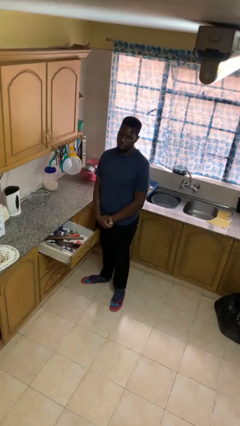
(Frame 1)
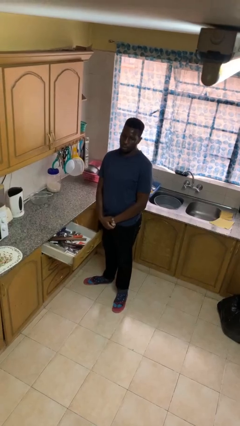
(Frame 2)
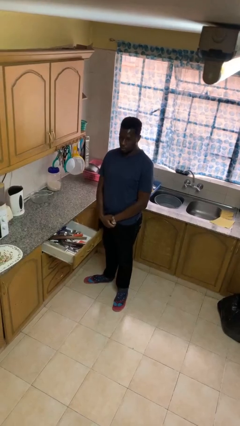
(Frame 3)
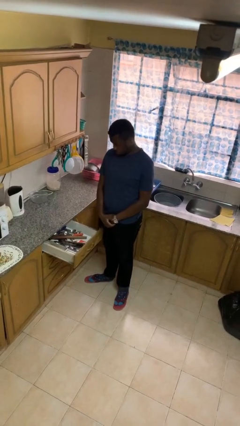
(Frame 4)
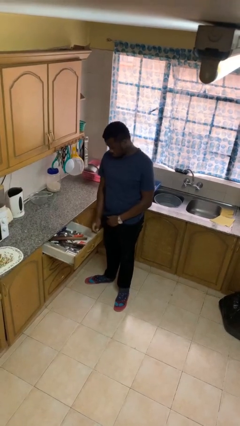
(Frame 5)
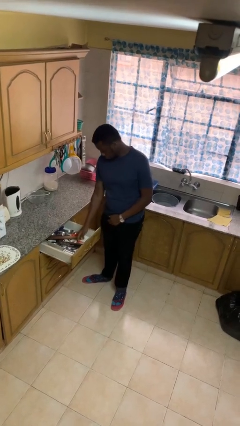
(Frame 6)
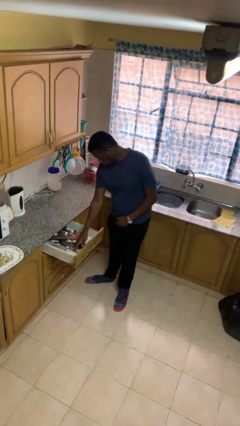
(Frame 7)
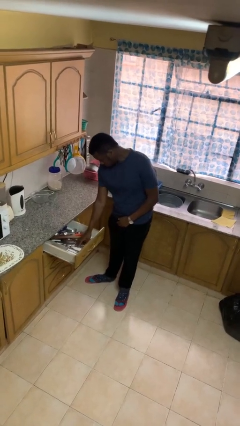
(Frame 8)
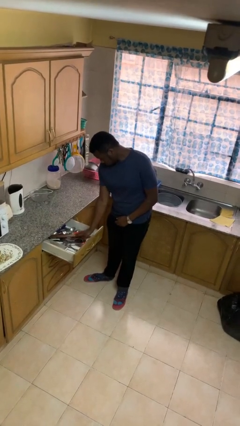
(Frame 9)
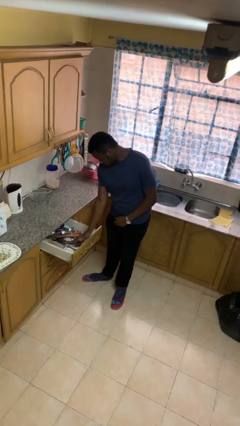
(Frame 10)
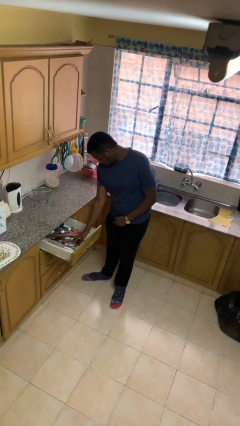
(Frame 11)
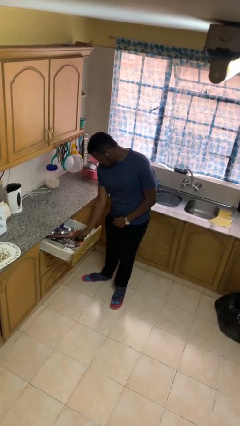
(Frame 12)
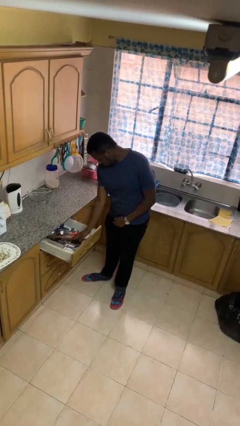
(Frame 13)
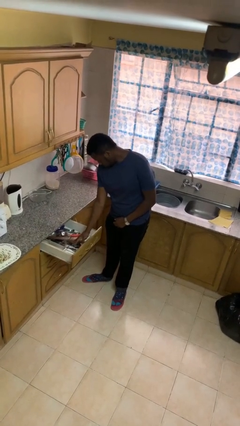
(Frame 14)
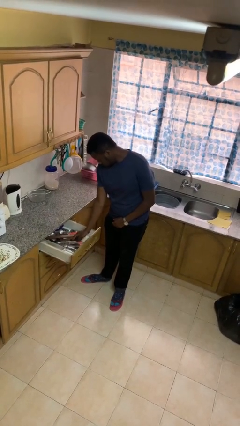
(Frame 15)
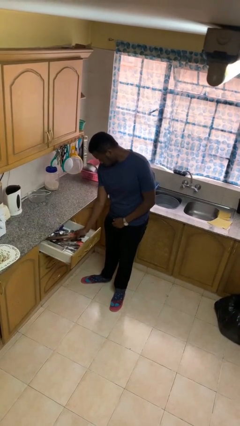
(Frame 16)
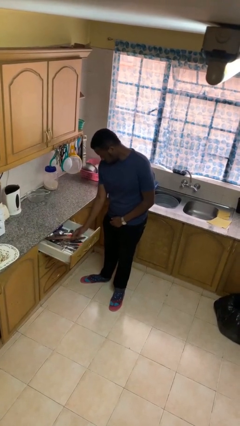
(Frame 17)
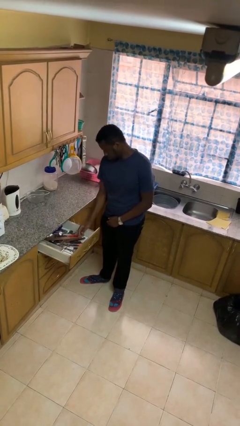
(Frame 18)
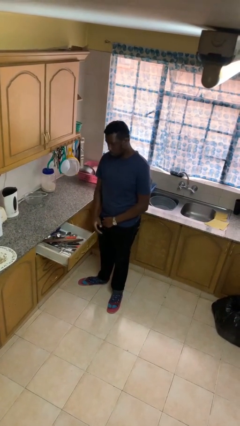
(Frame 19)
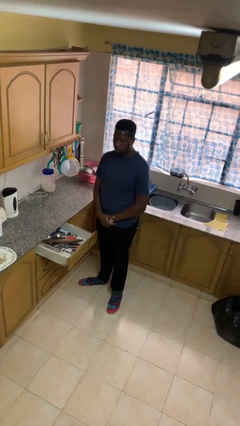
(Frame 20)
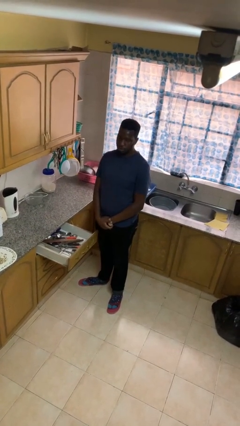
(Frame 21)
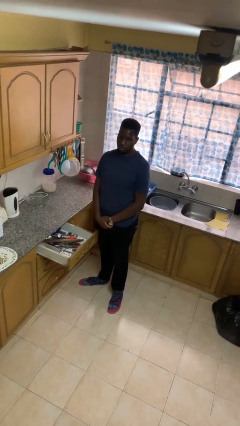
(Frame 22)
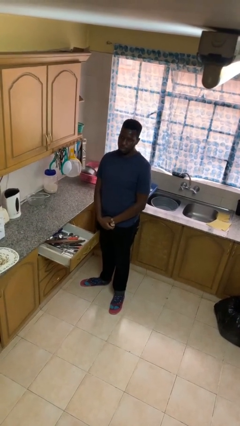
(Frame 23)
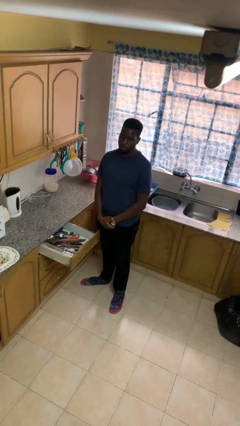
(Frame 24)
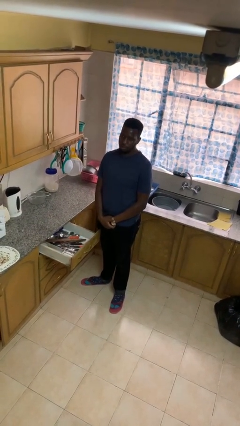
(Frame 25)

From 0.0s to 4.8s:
person searches in kitchen drawer

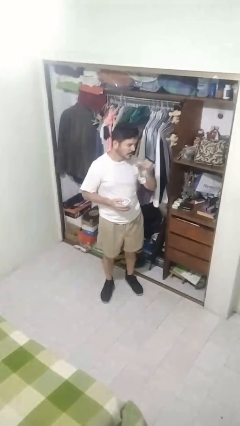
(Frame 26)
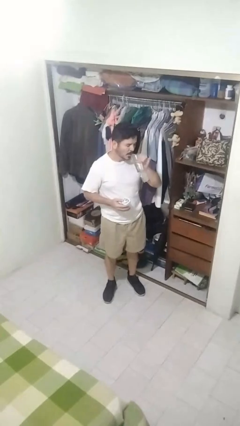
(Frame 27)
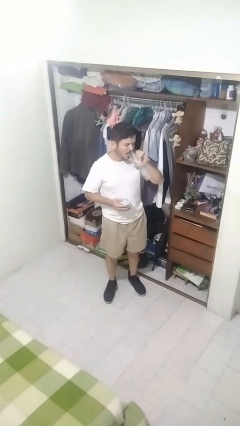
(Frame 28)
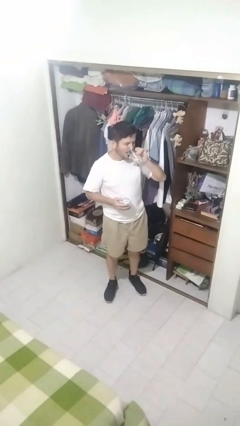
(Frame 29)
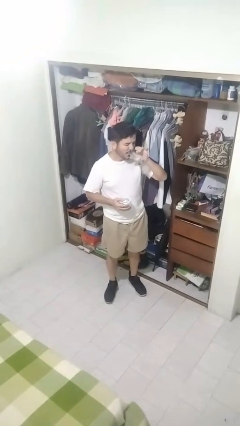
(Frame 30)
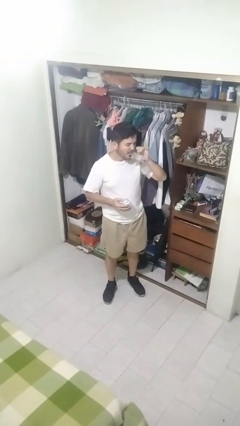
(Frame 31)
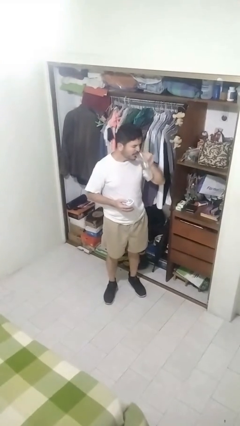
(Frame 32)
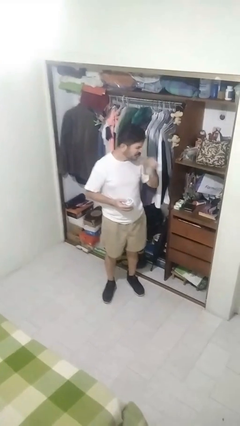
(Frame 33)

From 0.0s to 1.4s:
person drinks from cup

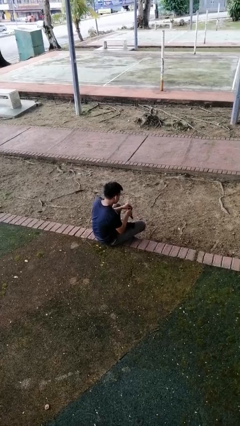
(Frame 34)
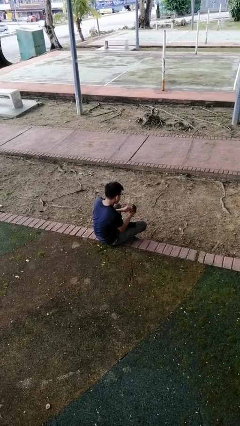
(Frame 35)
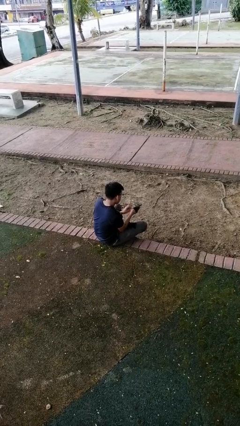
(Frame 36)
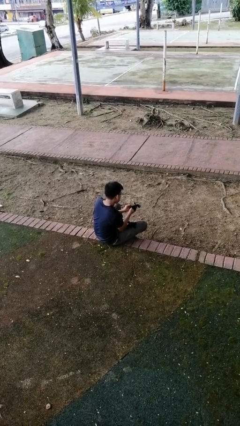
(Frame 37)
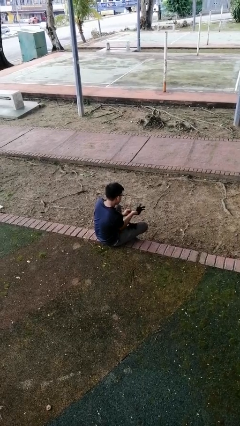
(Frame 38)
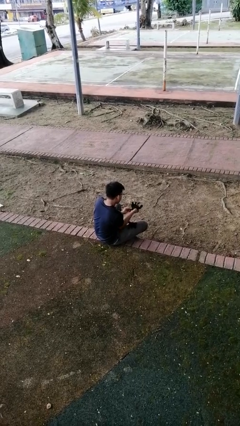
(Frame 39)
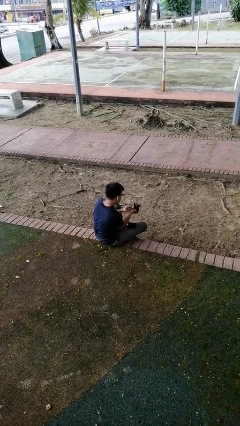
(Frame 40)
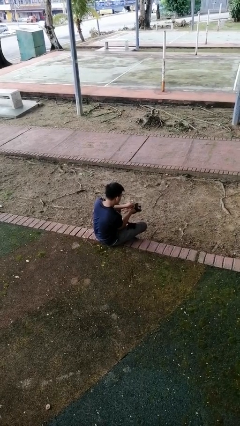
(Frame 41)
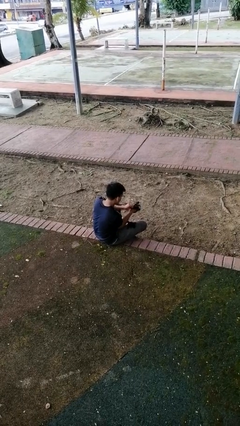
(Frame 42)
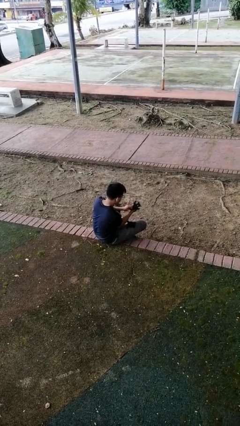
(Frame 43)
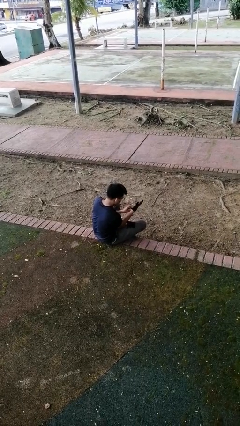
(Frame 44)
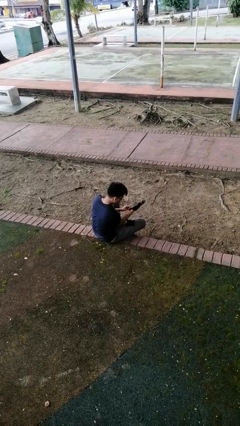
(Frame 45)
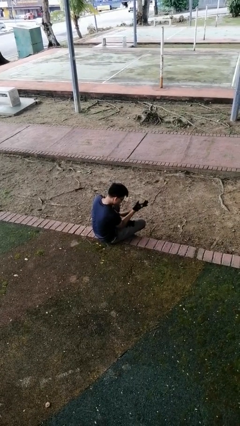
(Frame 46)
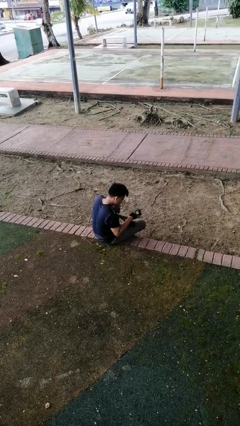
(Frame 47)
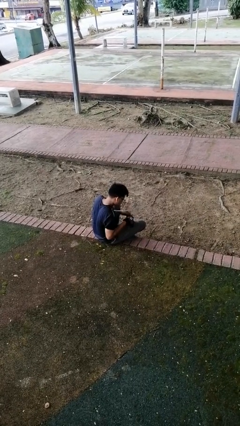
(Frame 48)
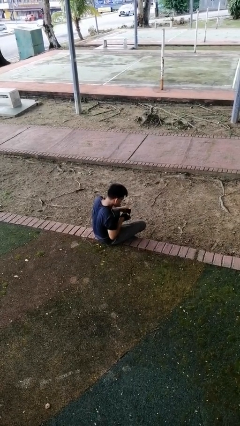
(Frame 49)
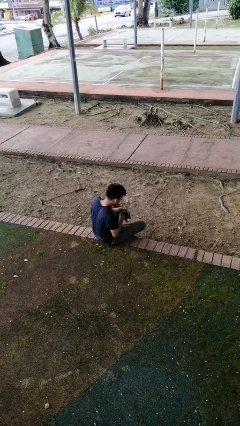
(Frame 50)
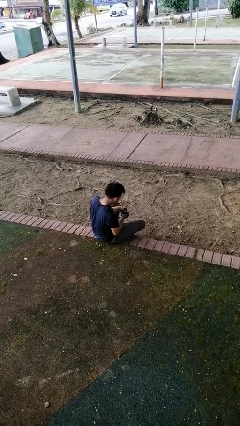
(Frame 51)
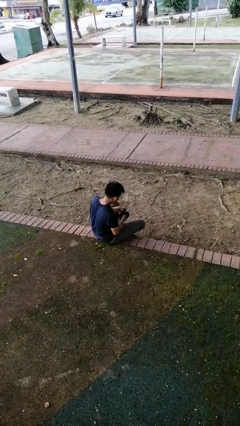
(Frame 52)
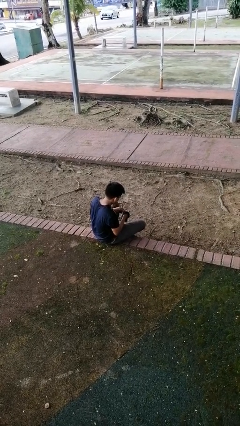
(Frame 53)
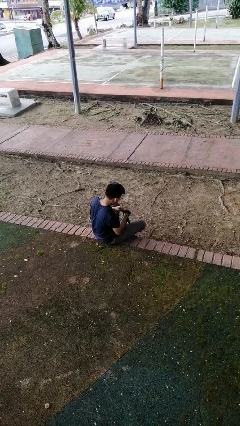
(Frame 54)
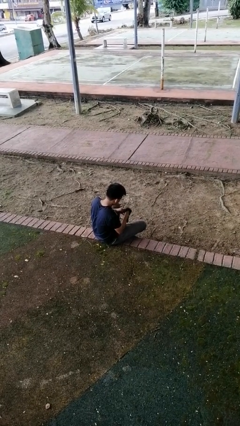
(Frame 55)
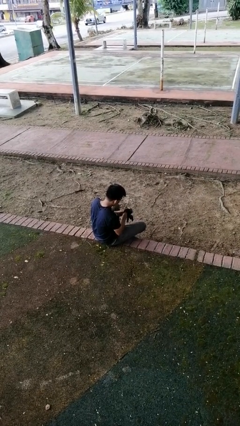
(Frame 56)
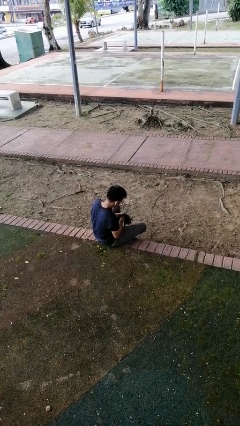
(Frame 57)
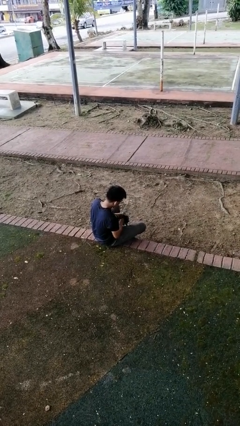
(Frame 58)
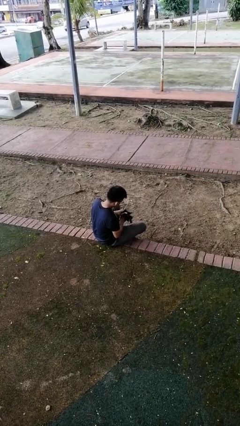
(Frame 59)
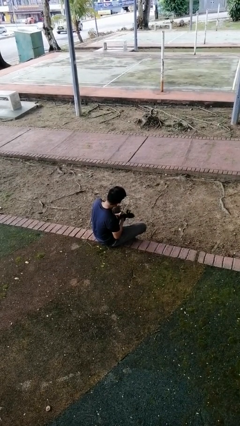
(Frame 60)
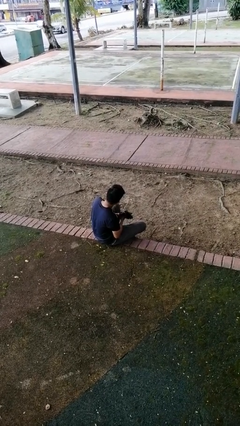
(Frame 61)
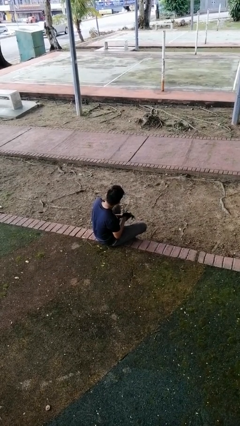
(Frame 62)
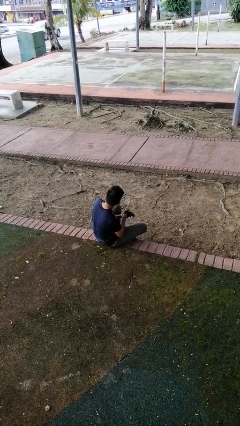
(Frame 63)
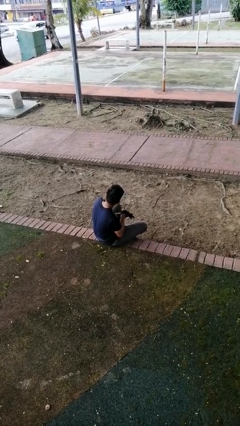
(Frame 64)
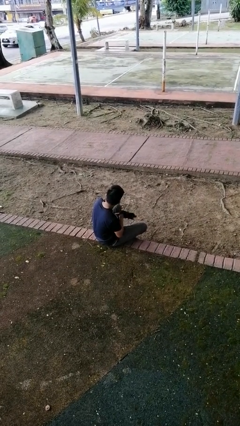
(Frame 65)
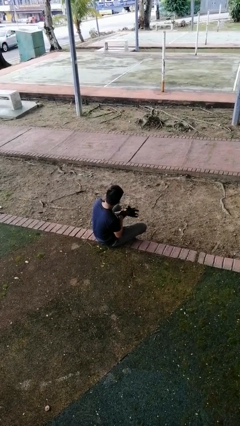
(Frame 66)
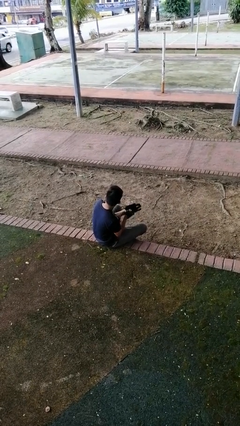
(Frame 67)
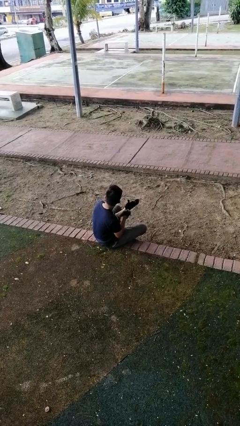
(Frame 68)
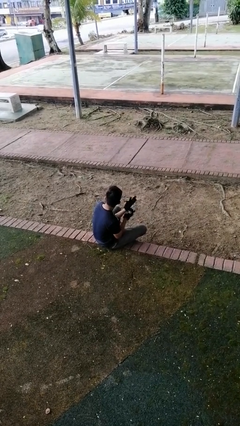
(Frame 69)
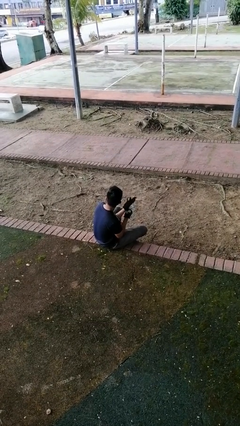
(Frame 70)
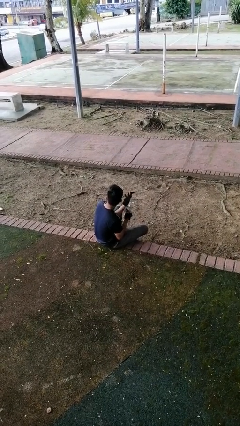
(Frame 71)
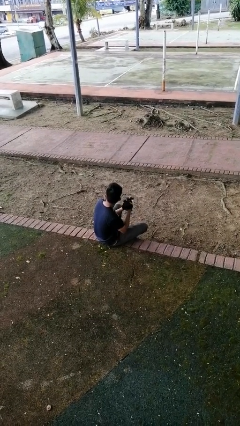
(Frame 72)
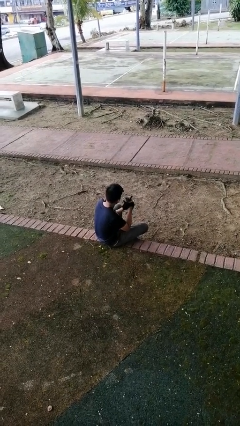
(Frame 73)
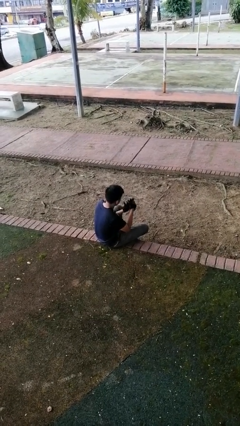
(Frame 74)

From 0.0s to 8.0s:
person puts on gloves

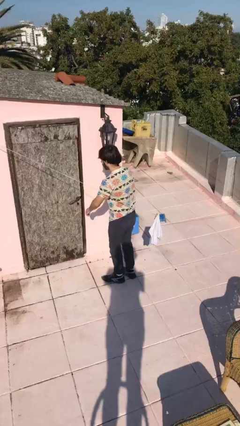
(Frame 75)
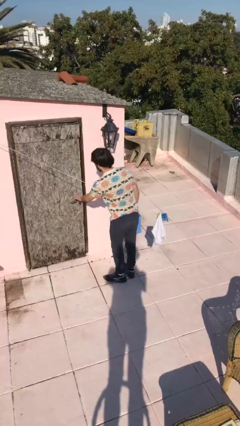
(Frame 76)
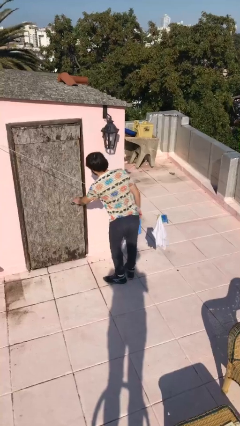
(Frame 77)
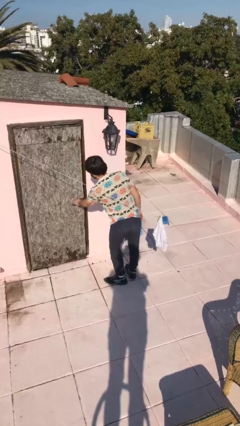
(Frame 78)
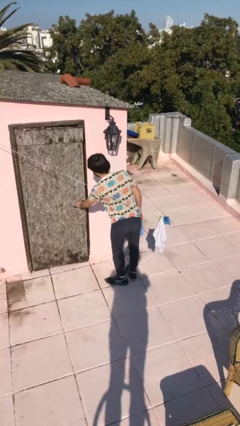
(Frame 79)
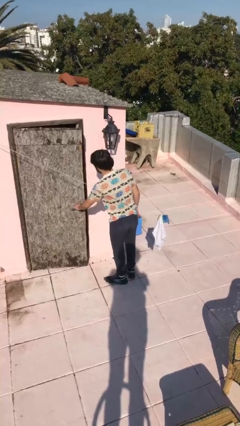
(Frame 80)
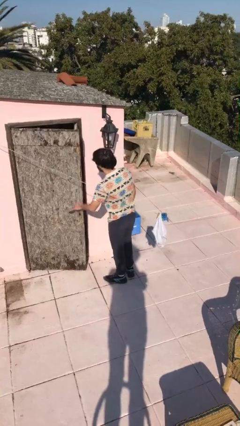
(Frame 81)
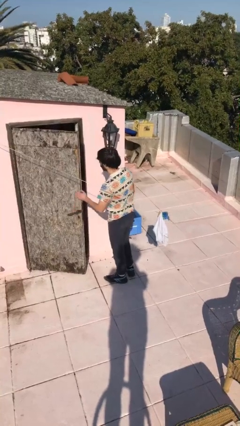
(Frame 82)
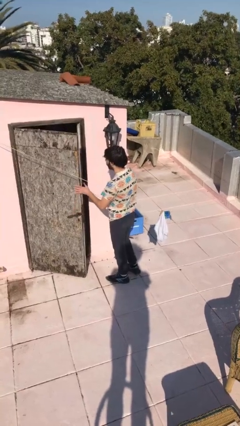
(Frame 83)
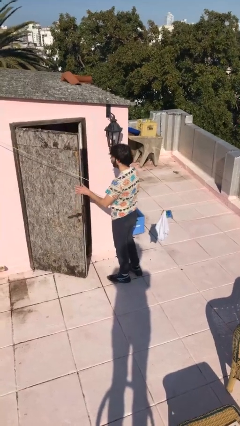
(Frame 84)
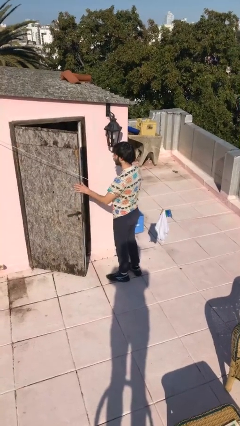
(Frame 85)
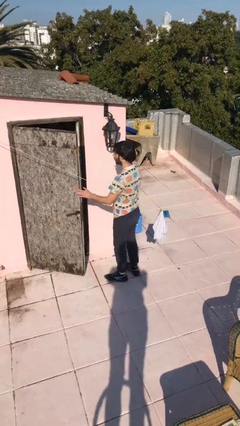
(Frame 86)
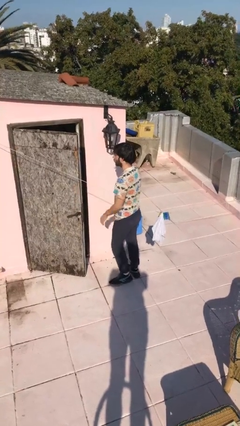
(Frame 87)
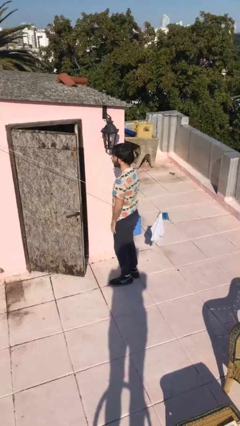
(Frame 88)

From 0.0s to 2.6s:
person opens facility door

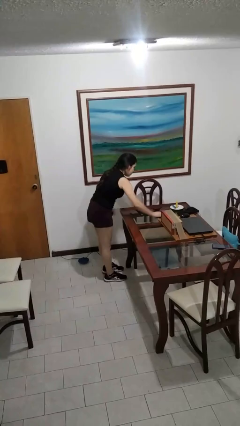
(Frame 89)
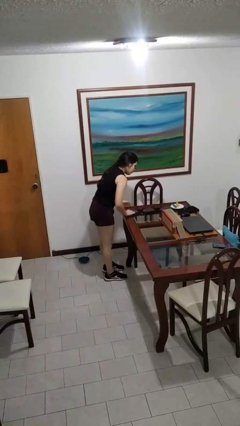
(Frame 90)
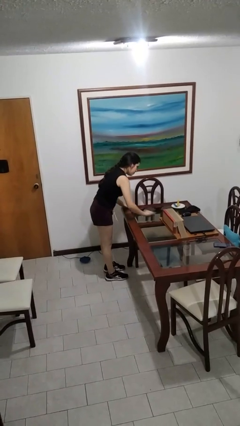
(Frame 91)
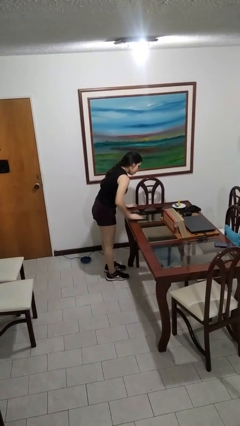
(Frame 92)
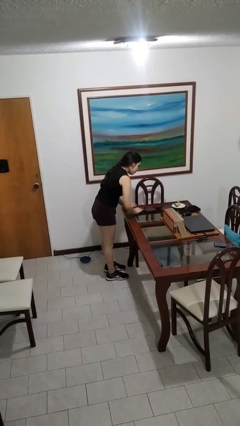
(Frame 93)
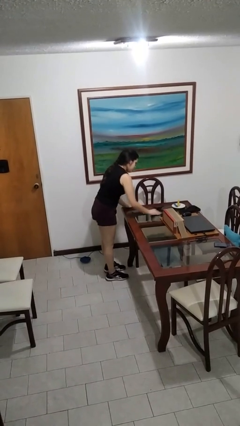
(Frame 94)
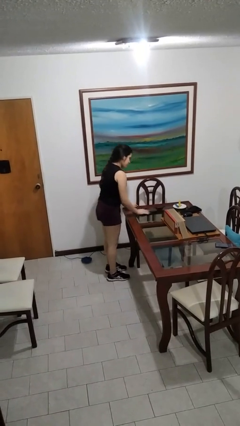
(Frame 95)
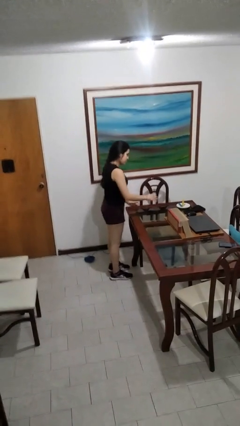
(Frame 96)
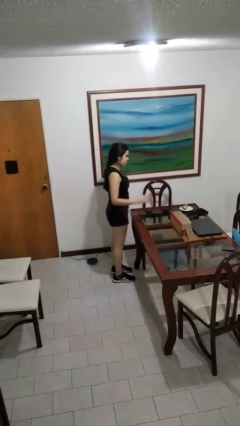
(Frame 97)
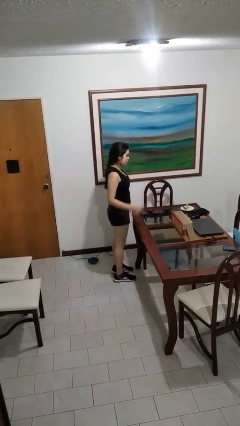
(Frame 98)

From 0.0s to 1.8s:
person cleans table with rag
